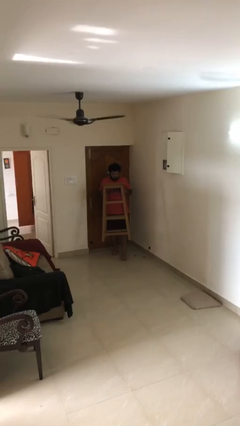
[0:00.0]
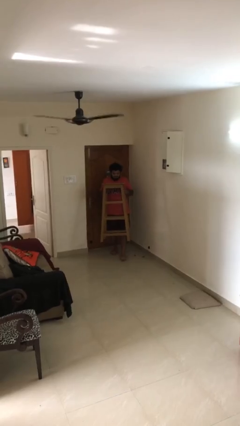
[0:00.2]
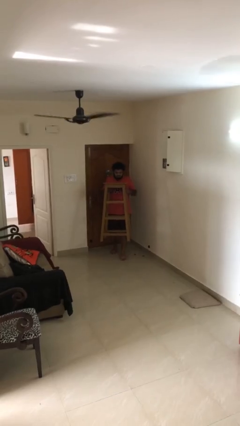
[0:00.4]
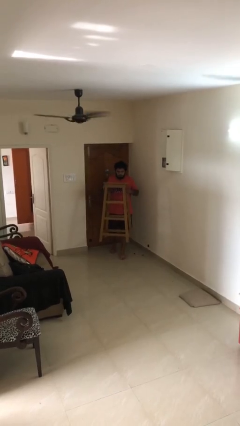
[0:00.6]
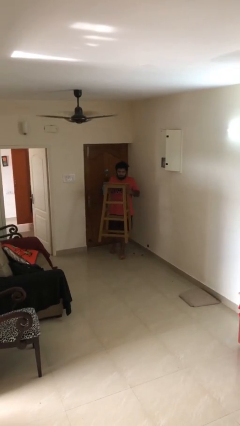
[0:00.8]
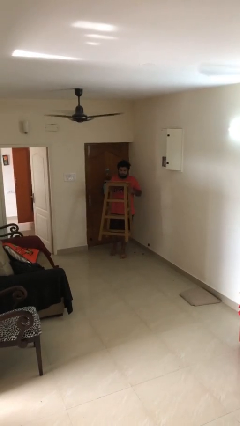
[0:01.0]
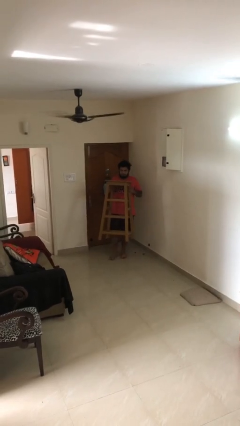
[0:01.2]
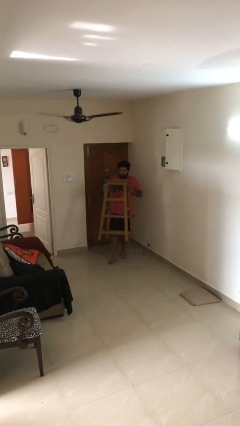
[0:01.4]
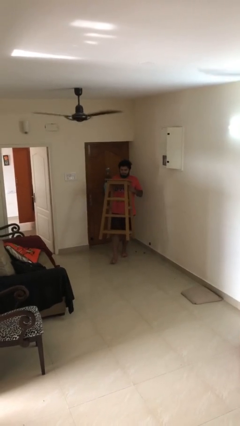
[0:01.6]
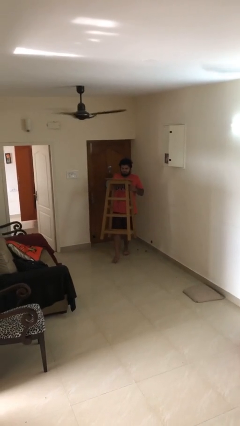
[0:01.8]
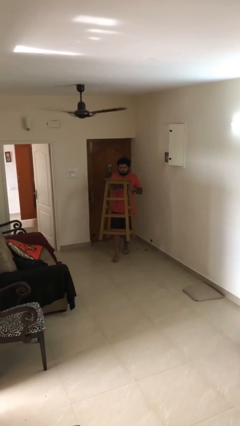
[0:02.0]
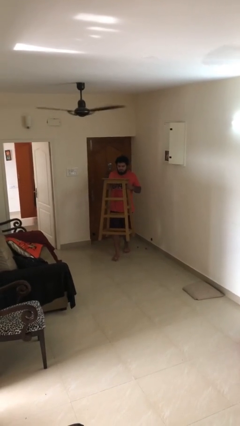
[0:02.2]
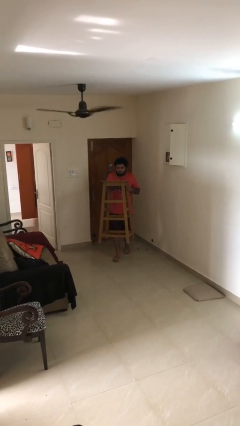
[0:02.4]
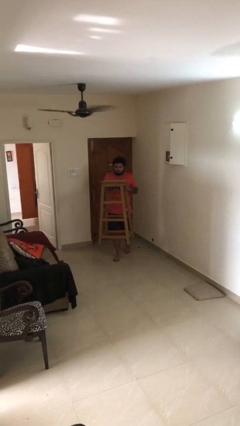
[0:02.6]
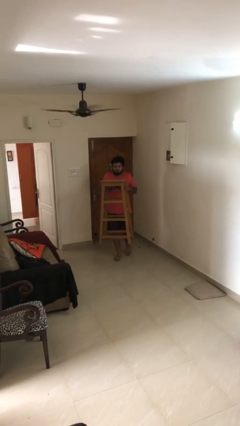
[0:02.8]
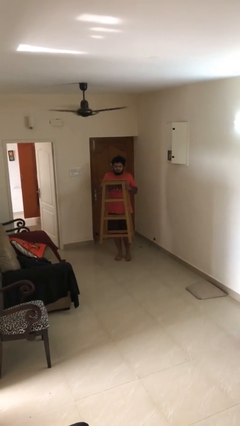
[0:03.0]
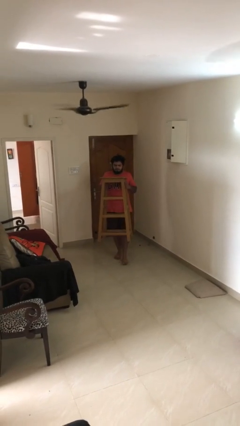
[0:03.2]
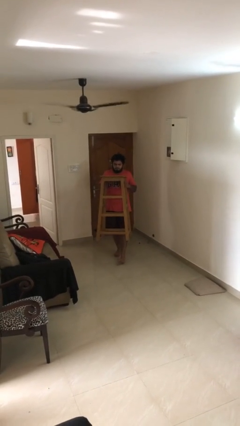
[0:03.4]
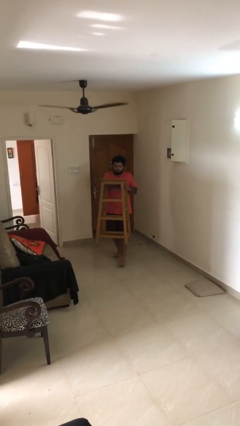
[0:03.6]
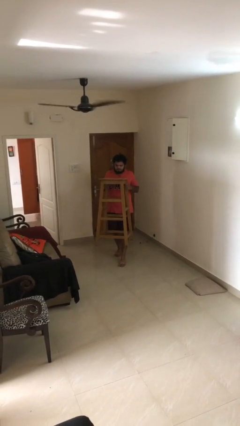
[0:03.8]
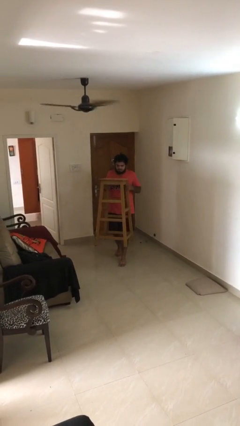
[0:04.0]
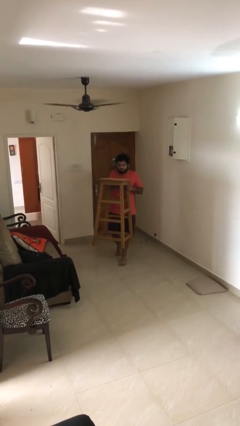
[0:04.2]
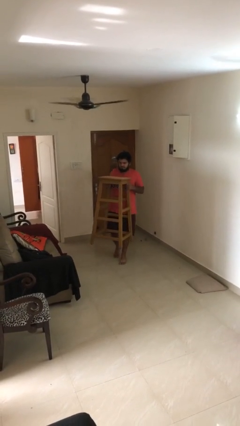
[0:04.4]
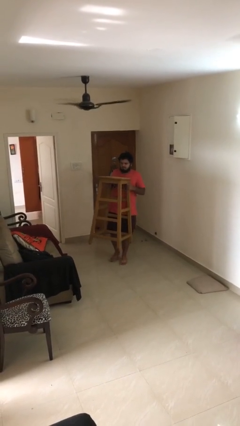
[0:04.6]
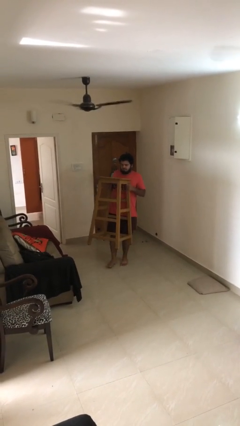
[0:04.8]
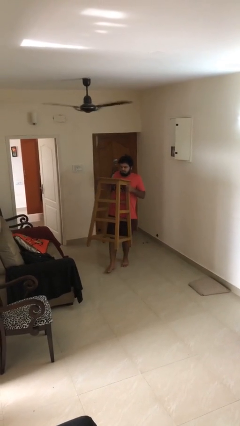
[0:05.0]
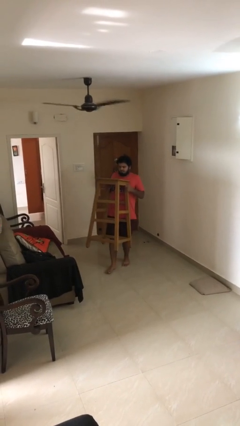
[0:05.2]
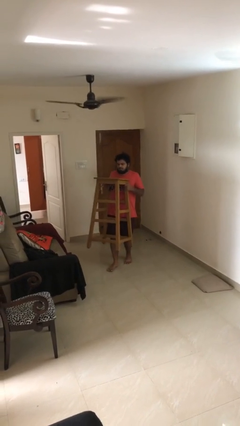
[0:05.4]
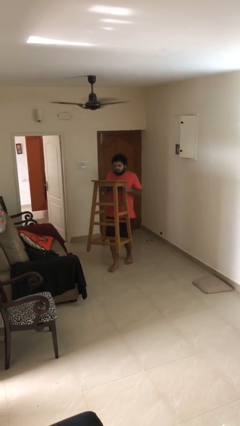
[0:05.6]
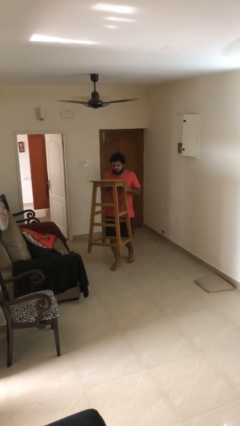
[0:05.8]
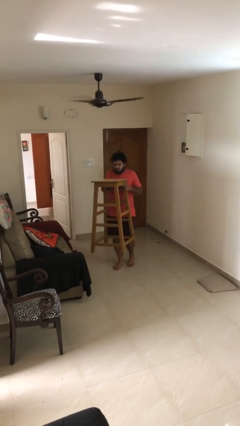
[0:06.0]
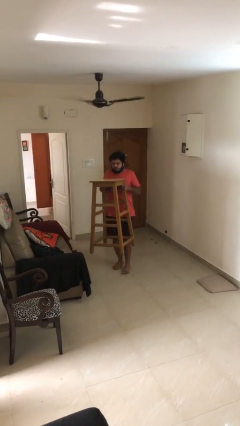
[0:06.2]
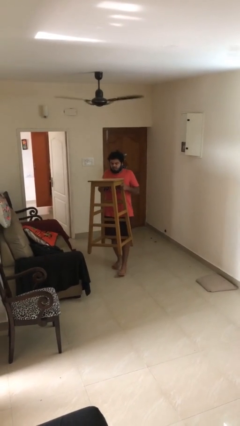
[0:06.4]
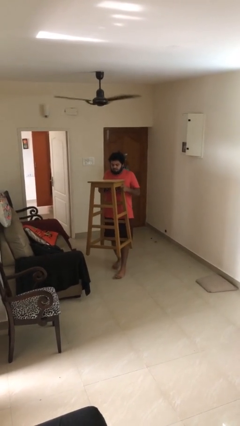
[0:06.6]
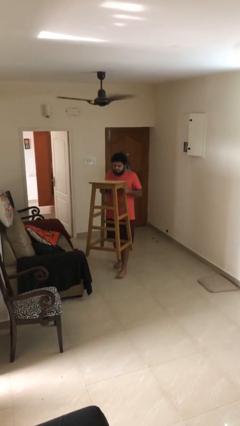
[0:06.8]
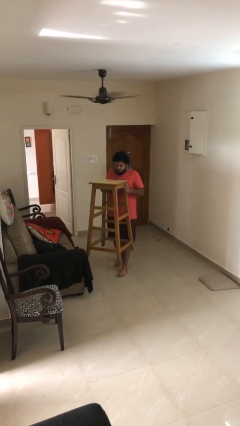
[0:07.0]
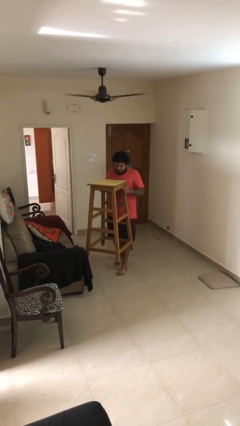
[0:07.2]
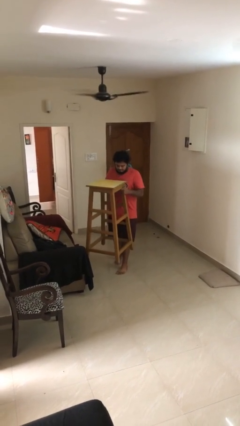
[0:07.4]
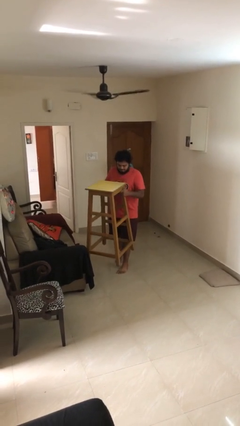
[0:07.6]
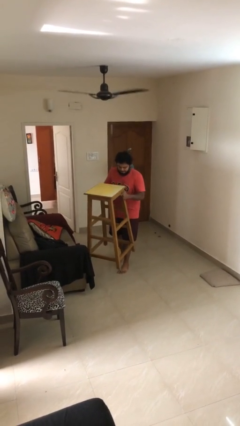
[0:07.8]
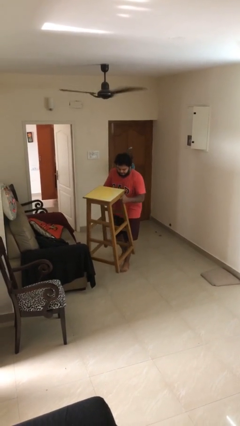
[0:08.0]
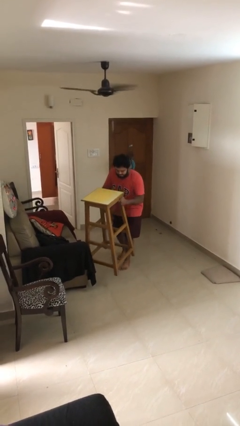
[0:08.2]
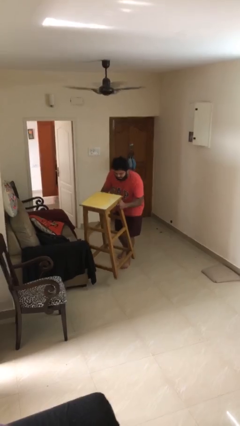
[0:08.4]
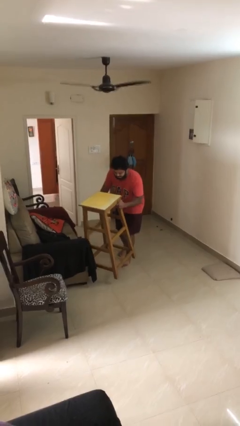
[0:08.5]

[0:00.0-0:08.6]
person carries heavy object

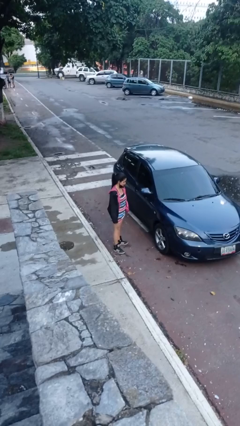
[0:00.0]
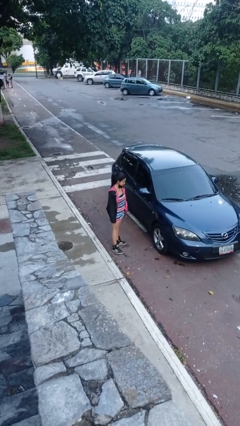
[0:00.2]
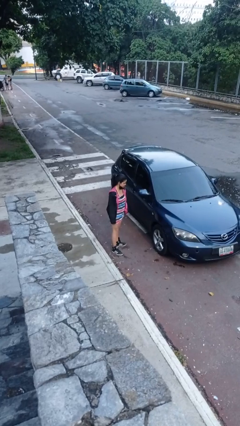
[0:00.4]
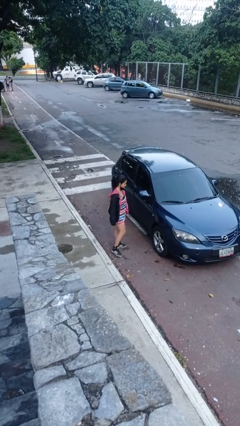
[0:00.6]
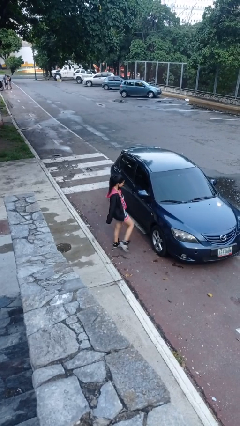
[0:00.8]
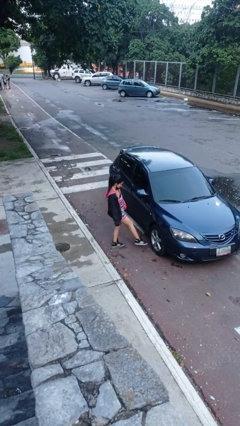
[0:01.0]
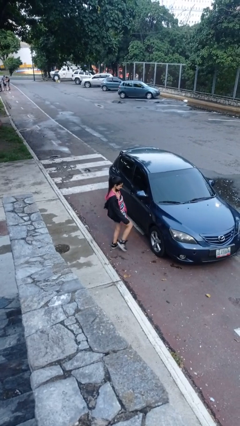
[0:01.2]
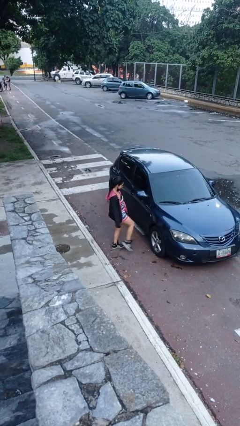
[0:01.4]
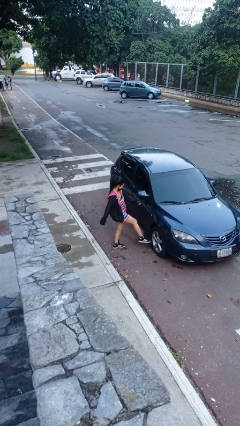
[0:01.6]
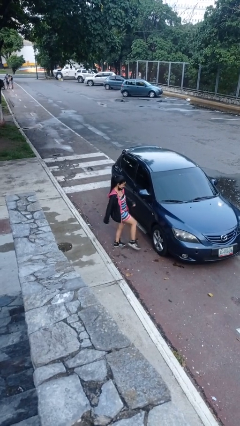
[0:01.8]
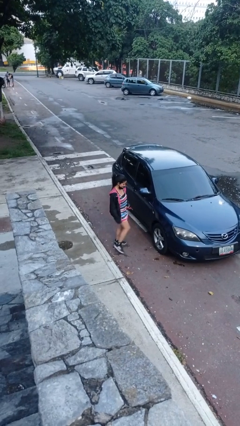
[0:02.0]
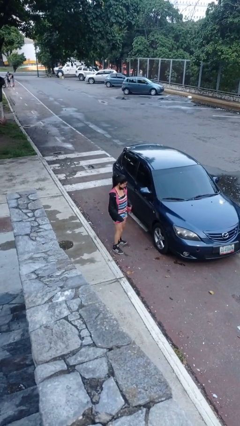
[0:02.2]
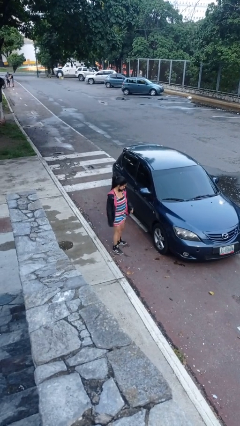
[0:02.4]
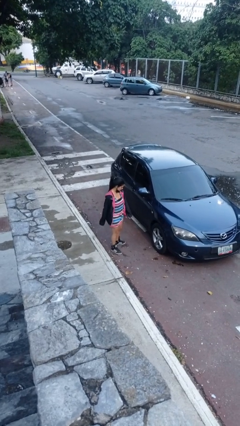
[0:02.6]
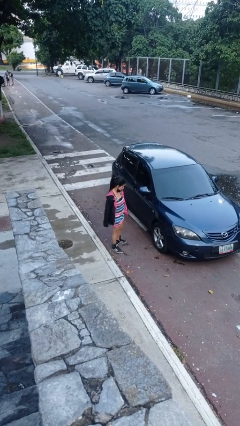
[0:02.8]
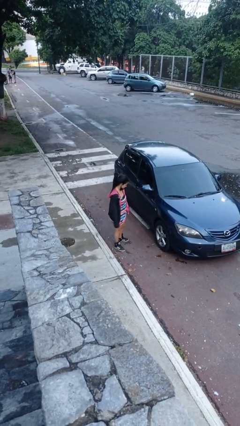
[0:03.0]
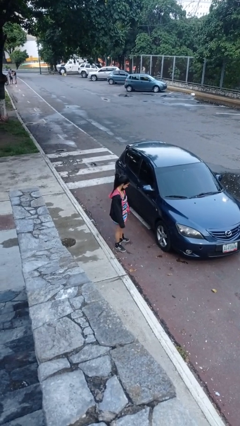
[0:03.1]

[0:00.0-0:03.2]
person kicks car tires

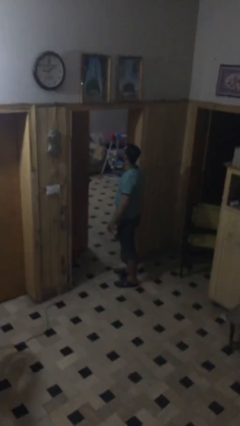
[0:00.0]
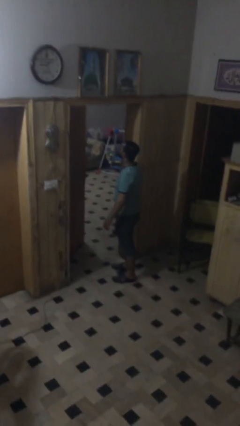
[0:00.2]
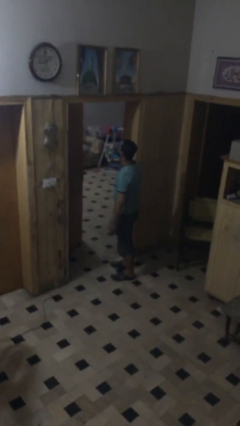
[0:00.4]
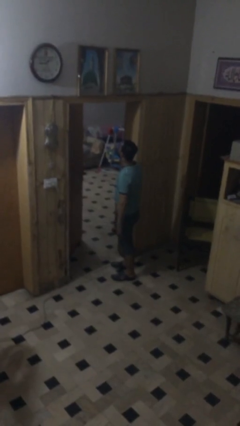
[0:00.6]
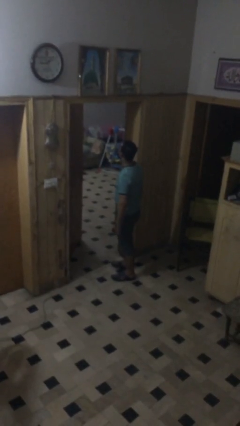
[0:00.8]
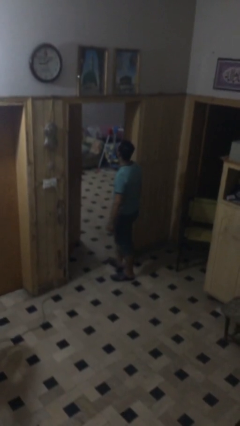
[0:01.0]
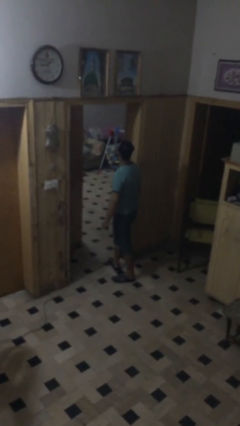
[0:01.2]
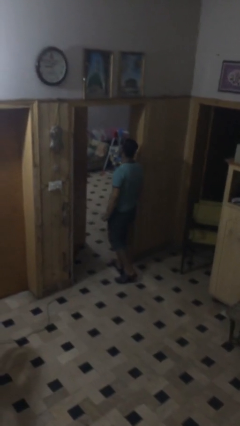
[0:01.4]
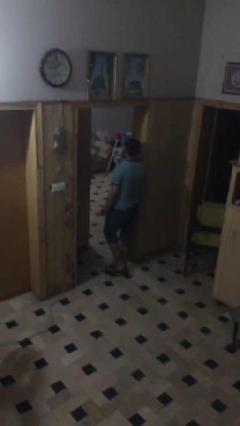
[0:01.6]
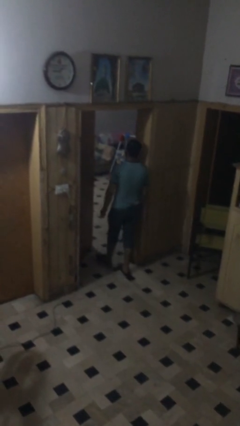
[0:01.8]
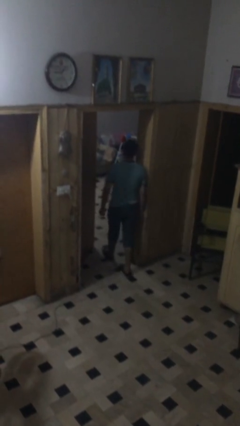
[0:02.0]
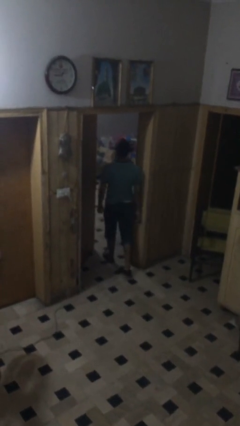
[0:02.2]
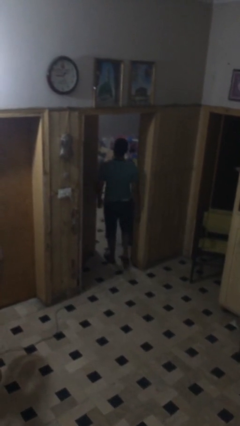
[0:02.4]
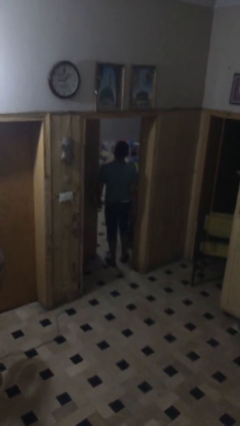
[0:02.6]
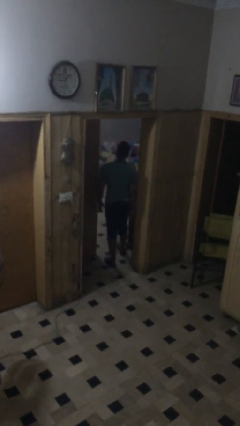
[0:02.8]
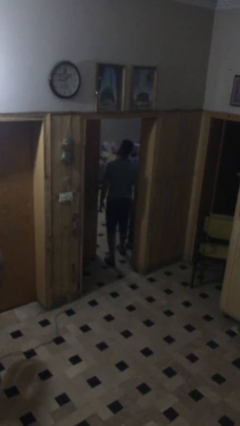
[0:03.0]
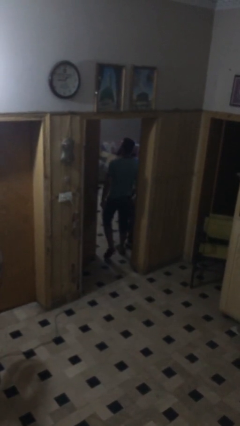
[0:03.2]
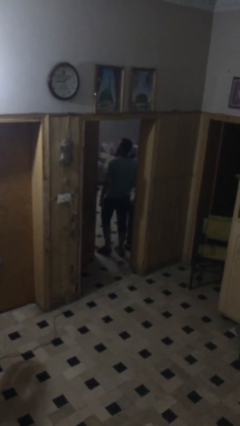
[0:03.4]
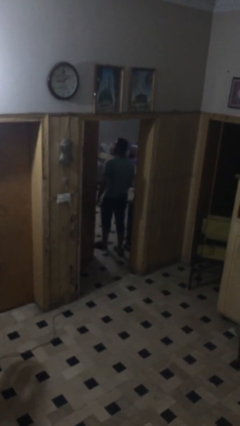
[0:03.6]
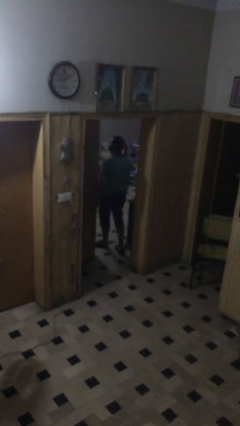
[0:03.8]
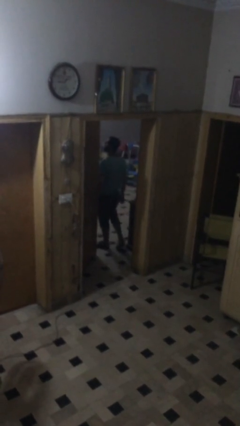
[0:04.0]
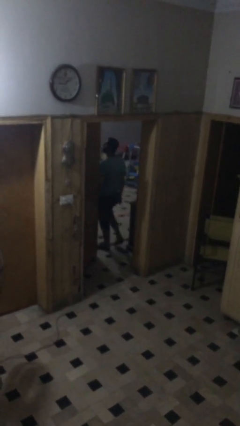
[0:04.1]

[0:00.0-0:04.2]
person exits scene through structure

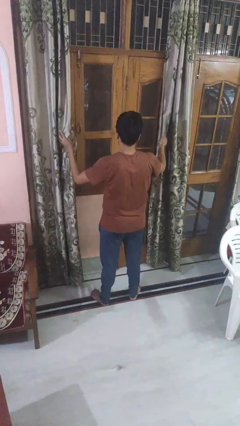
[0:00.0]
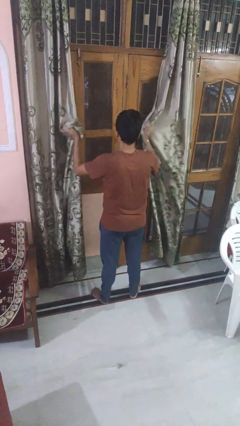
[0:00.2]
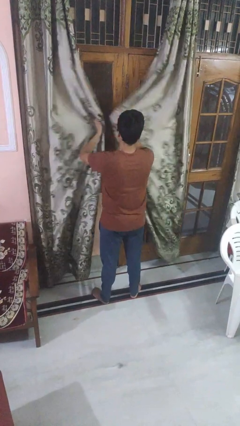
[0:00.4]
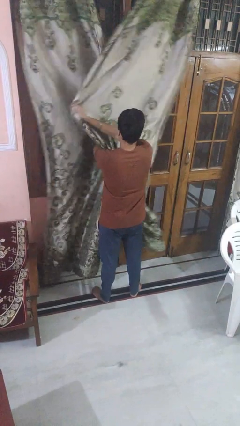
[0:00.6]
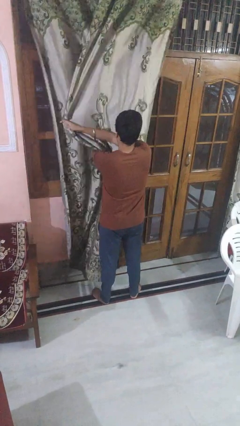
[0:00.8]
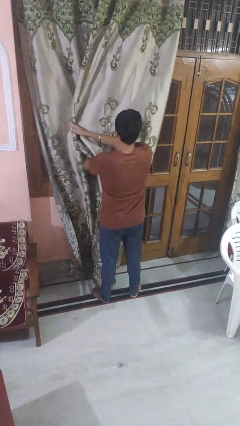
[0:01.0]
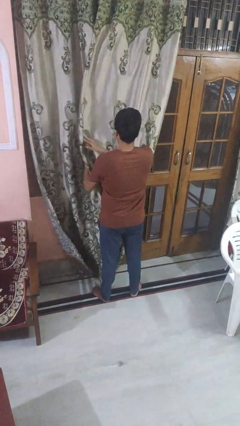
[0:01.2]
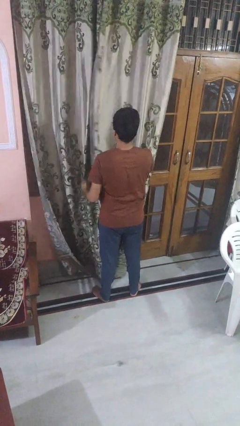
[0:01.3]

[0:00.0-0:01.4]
person closes curtains

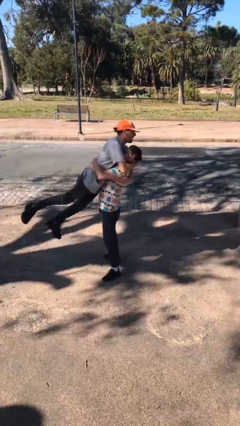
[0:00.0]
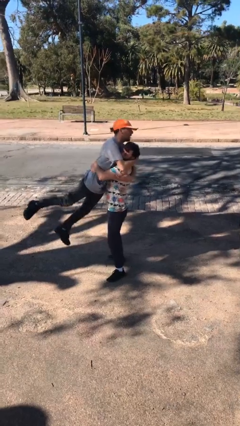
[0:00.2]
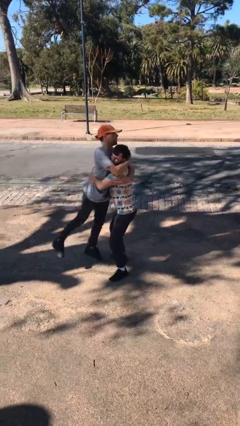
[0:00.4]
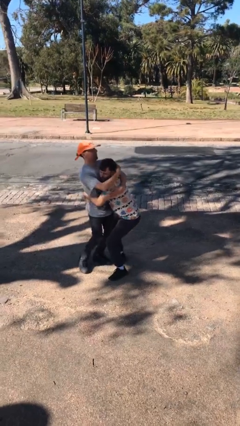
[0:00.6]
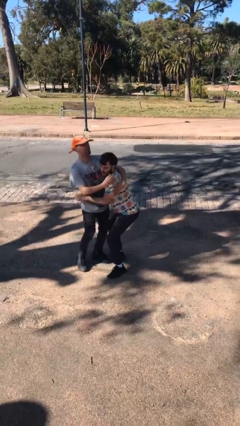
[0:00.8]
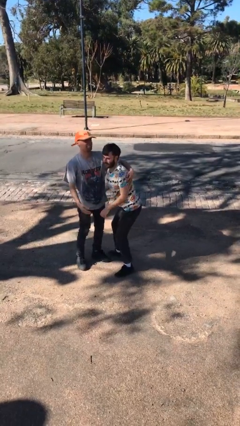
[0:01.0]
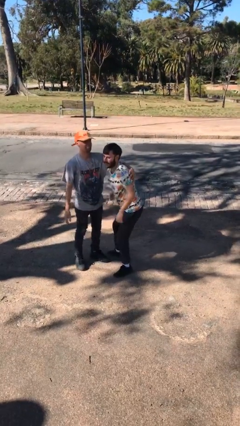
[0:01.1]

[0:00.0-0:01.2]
person puts down person
